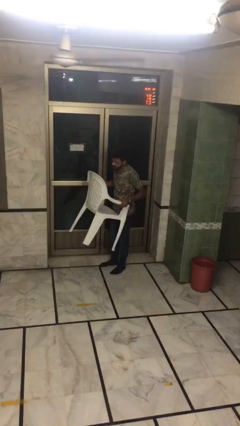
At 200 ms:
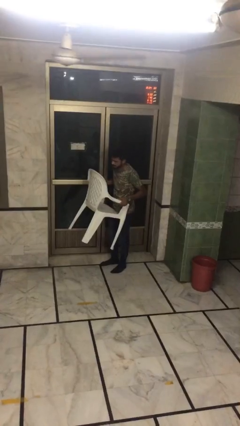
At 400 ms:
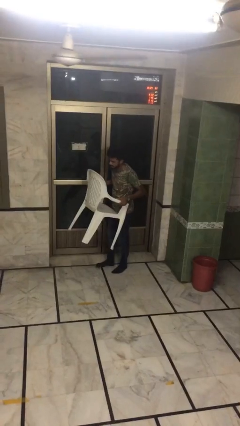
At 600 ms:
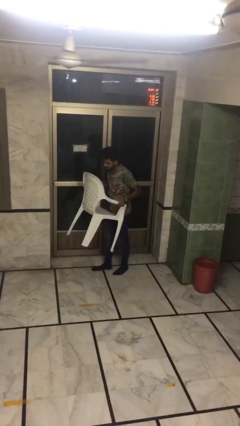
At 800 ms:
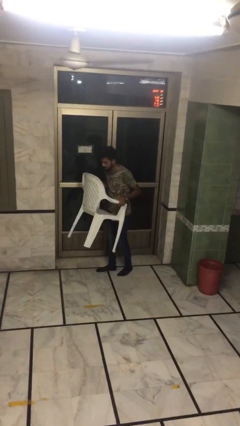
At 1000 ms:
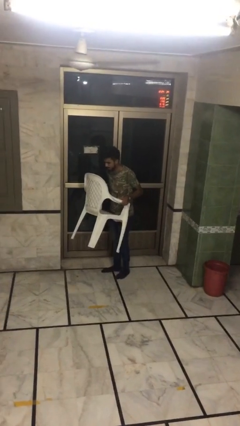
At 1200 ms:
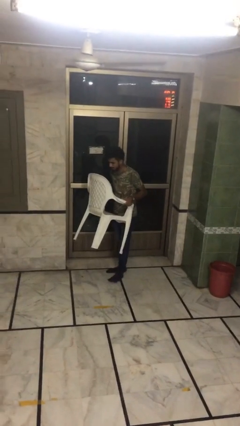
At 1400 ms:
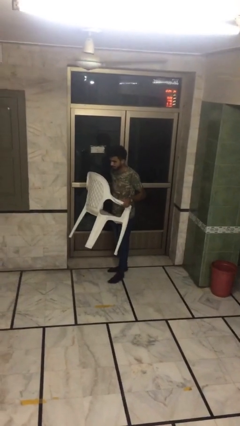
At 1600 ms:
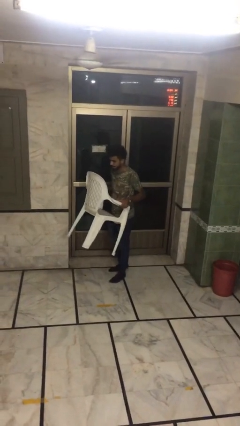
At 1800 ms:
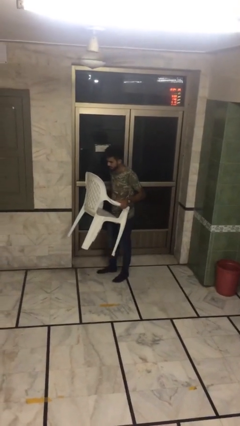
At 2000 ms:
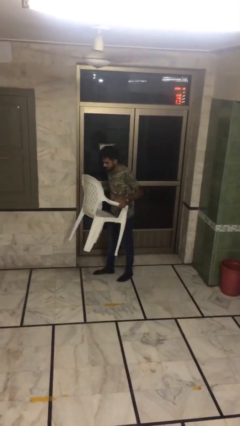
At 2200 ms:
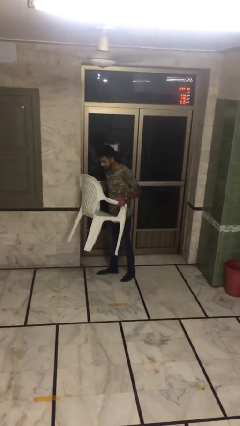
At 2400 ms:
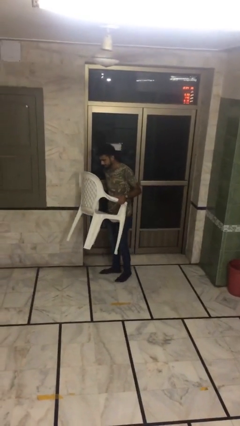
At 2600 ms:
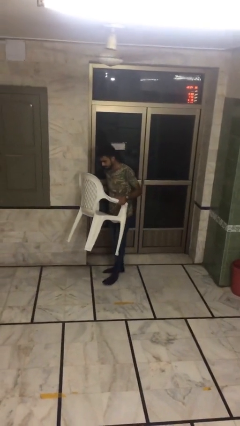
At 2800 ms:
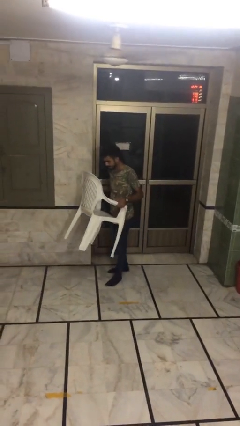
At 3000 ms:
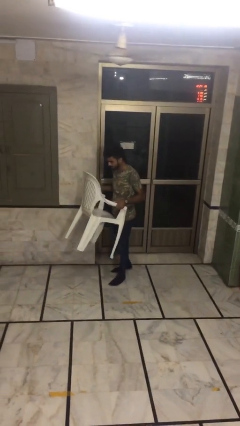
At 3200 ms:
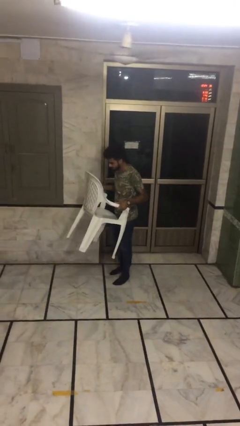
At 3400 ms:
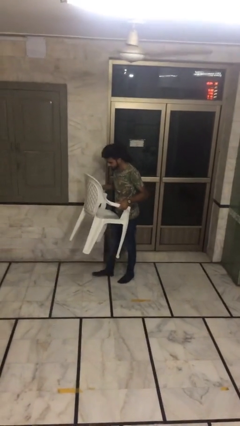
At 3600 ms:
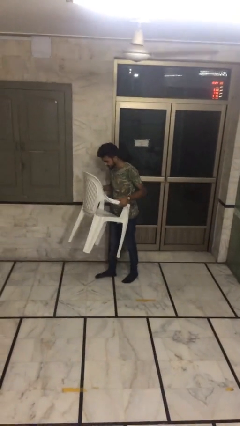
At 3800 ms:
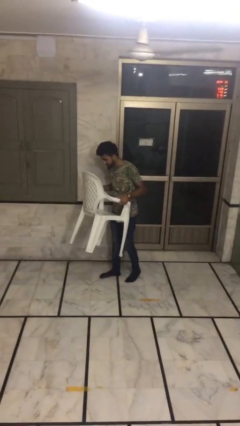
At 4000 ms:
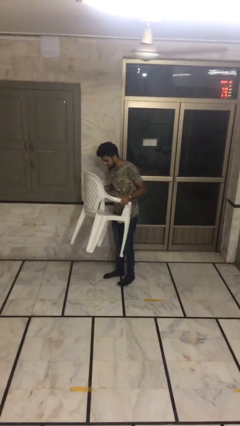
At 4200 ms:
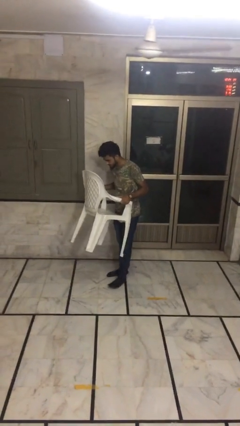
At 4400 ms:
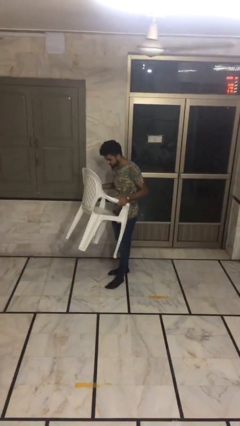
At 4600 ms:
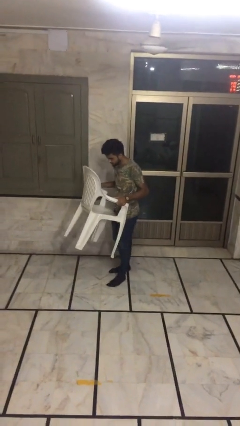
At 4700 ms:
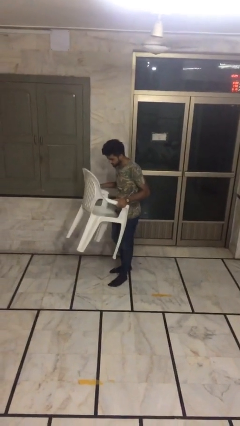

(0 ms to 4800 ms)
person carries heavy object

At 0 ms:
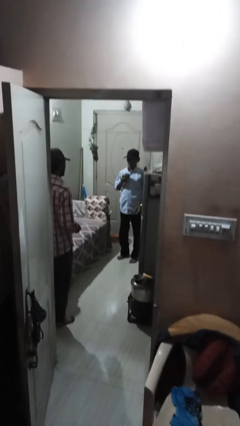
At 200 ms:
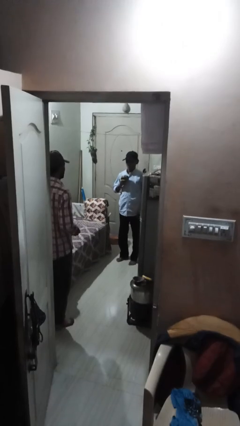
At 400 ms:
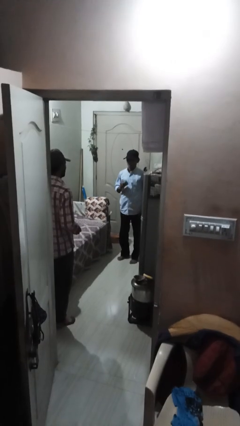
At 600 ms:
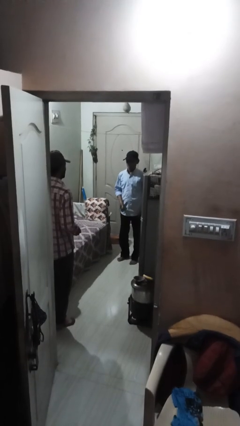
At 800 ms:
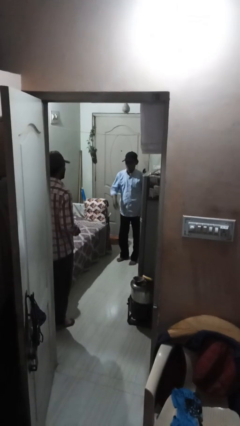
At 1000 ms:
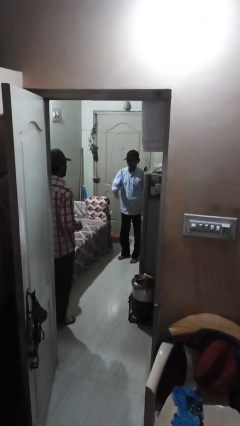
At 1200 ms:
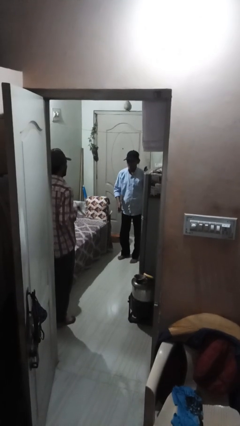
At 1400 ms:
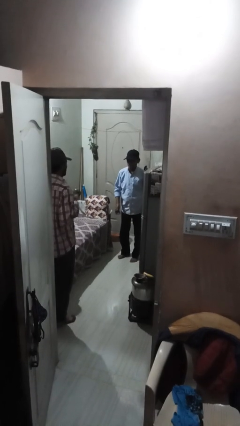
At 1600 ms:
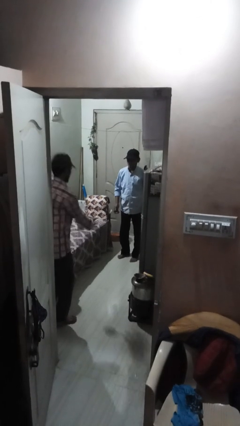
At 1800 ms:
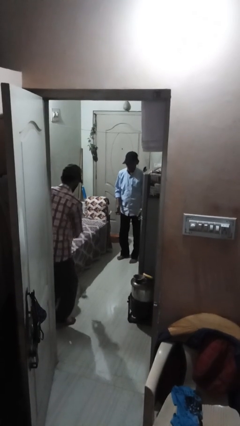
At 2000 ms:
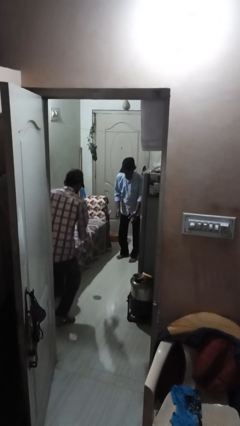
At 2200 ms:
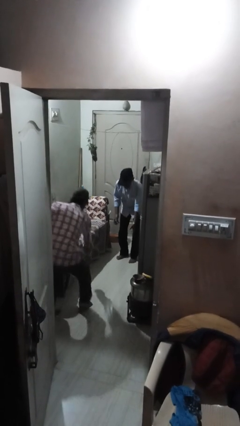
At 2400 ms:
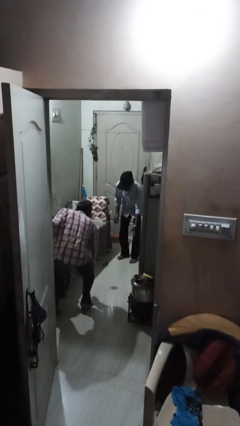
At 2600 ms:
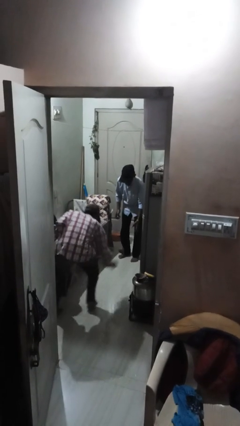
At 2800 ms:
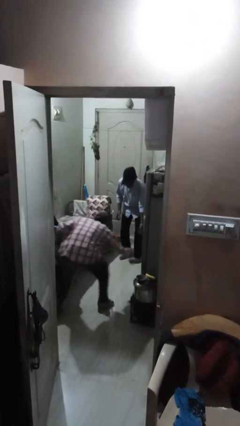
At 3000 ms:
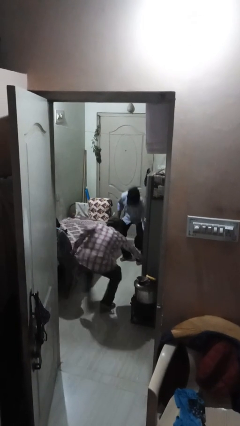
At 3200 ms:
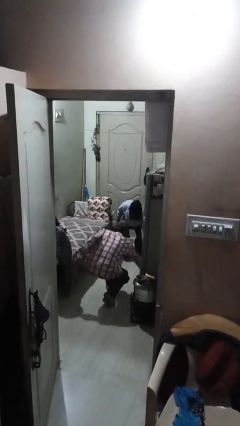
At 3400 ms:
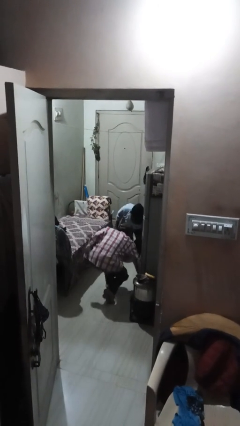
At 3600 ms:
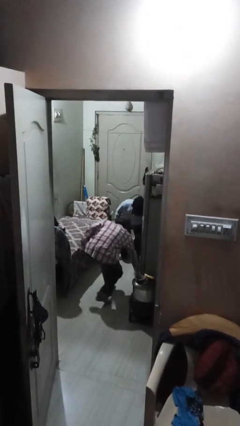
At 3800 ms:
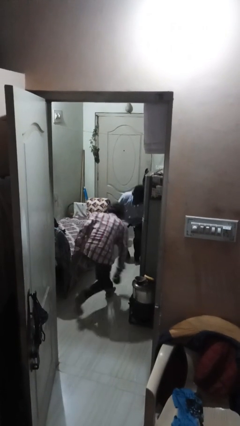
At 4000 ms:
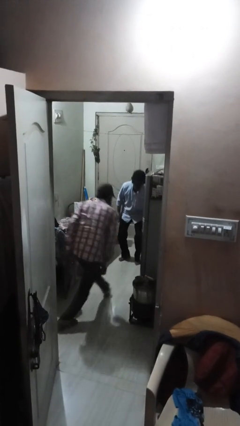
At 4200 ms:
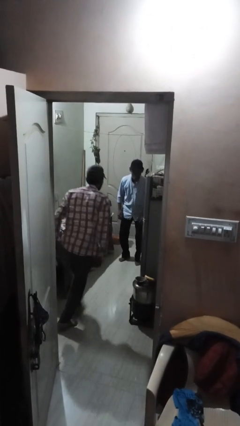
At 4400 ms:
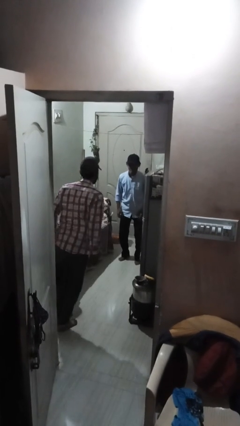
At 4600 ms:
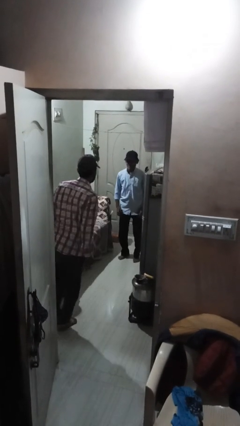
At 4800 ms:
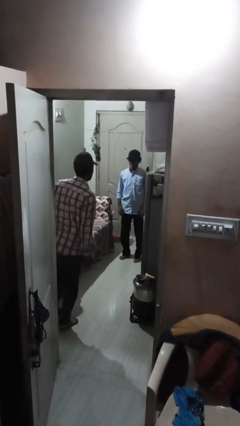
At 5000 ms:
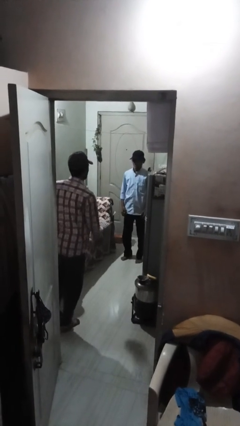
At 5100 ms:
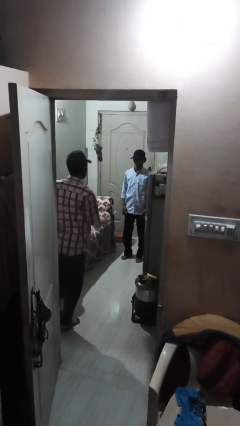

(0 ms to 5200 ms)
person throws object to person

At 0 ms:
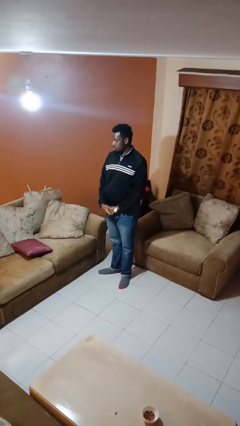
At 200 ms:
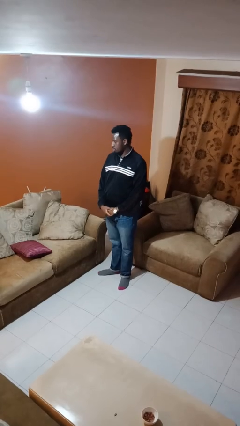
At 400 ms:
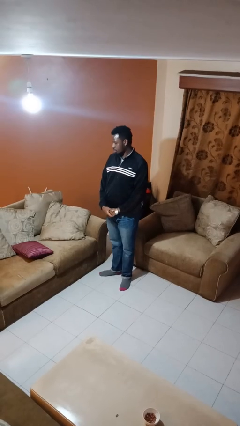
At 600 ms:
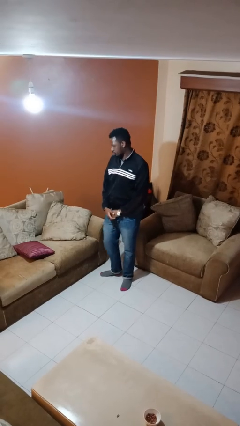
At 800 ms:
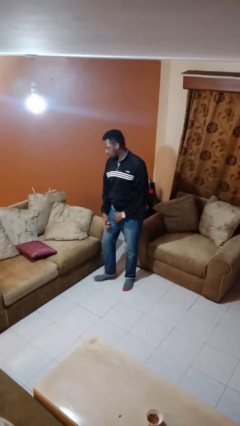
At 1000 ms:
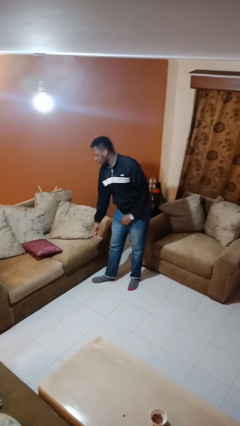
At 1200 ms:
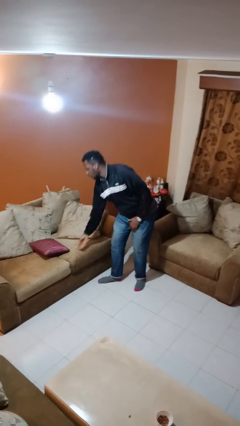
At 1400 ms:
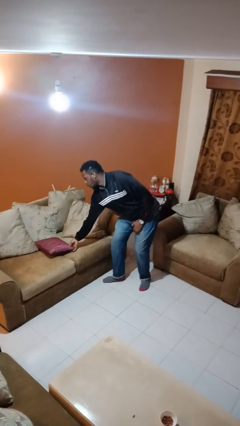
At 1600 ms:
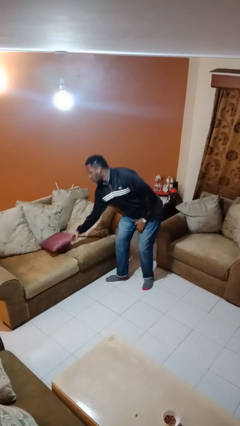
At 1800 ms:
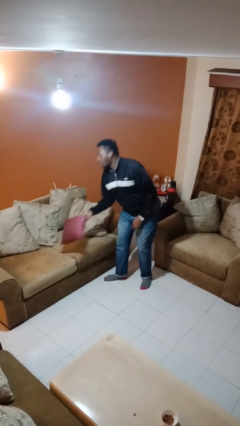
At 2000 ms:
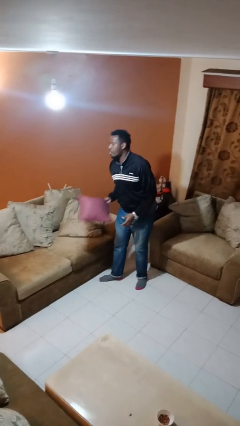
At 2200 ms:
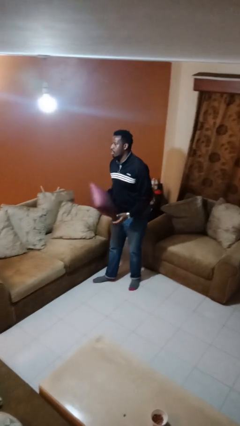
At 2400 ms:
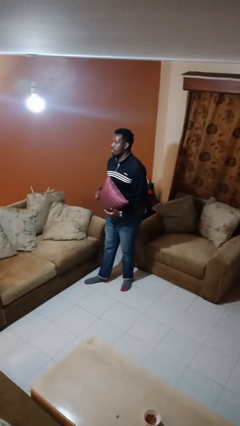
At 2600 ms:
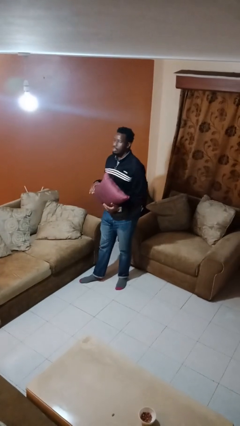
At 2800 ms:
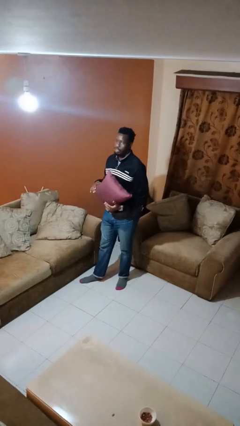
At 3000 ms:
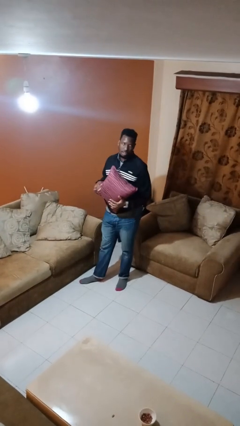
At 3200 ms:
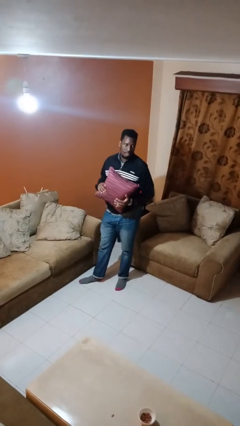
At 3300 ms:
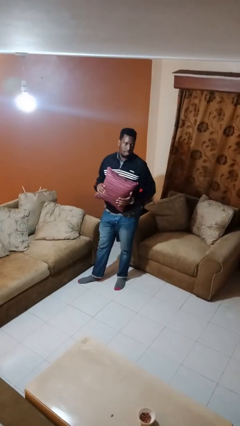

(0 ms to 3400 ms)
person picks up object from couch

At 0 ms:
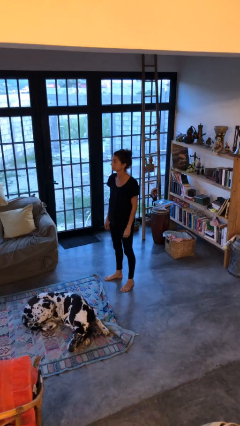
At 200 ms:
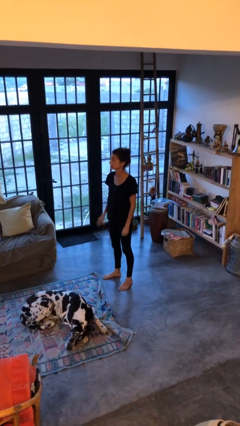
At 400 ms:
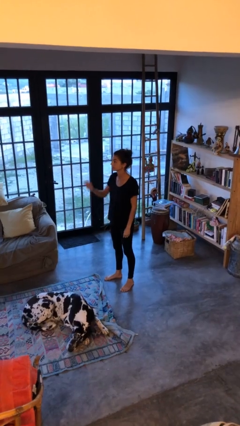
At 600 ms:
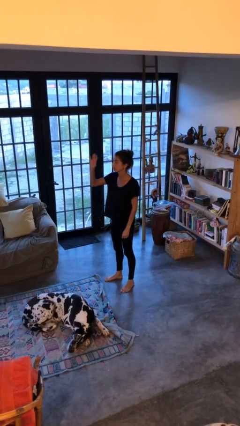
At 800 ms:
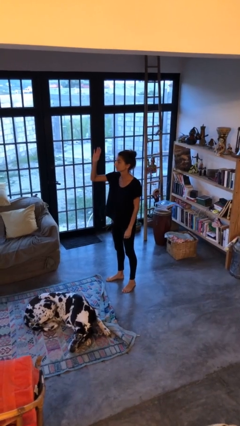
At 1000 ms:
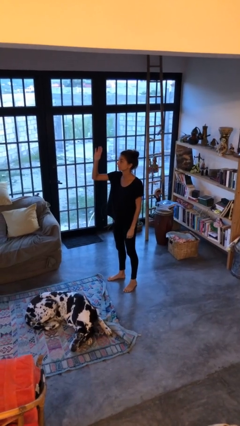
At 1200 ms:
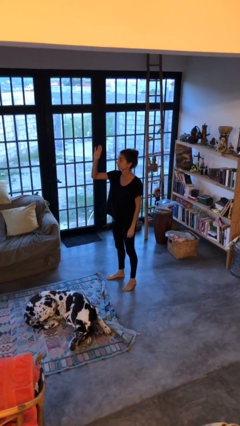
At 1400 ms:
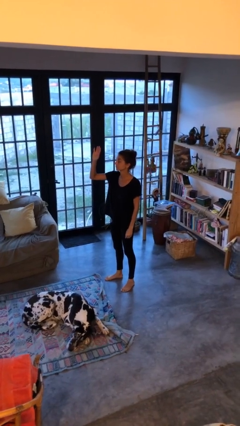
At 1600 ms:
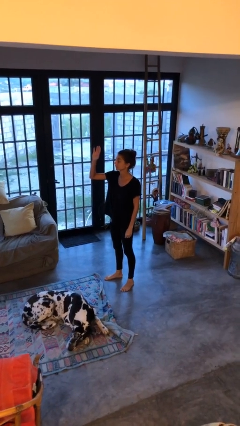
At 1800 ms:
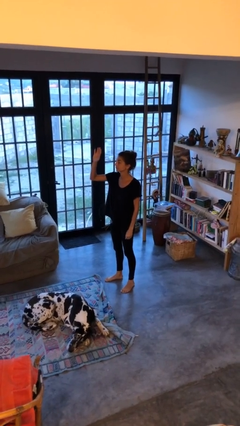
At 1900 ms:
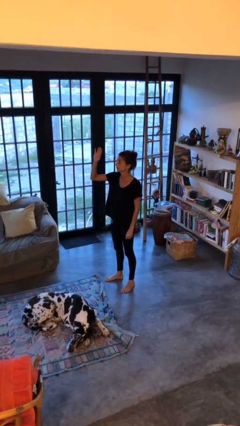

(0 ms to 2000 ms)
person gestures raise hand

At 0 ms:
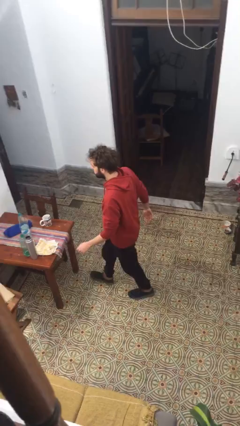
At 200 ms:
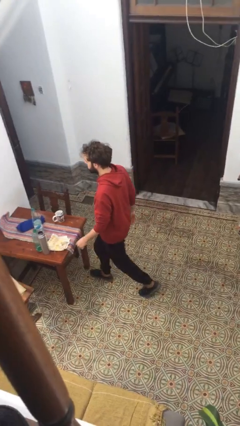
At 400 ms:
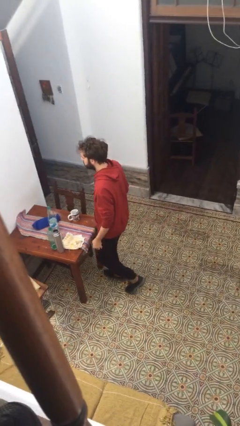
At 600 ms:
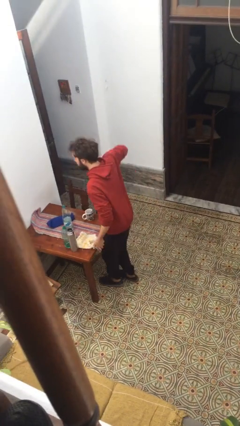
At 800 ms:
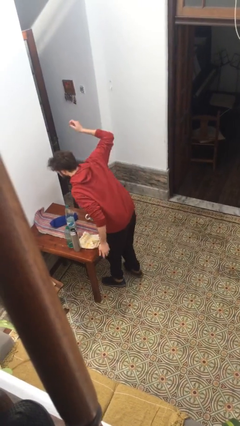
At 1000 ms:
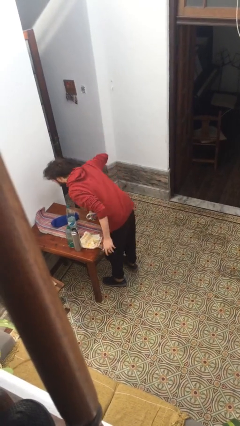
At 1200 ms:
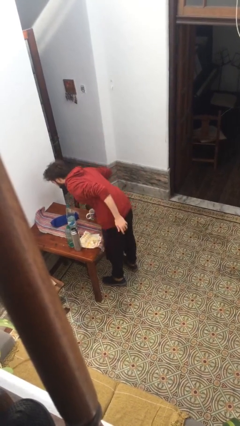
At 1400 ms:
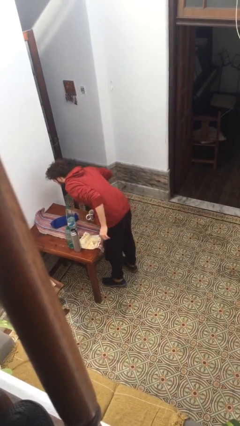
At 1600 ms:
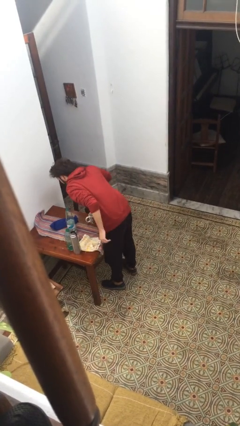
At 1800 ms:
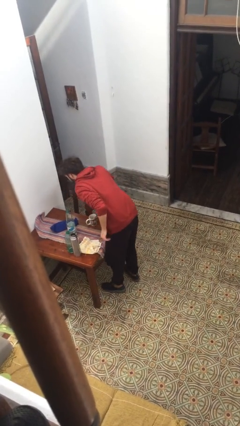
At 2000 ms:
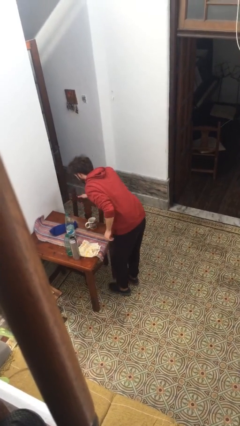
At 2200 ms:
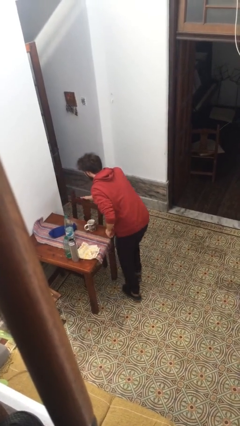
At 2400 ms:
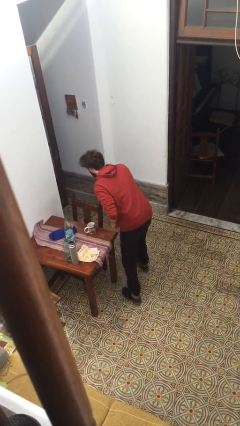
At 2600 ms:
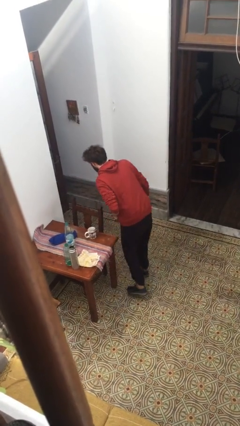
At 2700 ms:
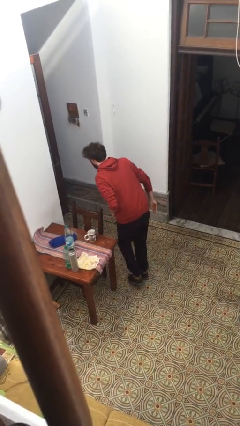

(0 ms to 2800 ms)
person bumps into table
